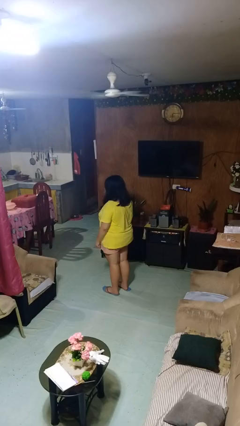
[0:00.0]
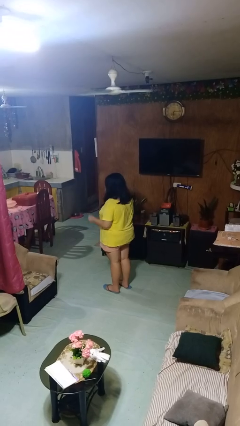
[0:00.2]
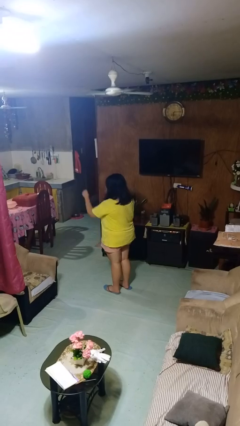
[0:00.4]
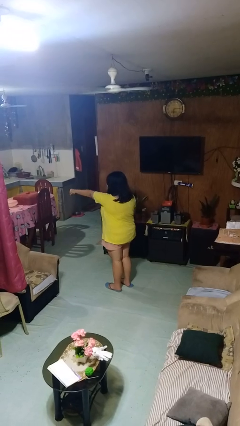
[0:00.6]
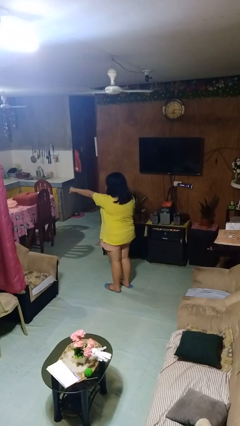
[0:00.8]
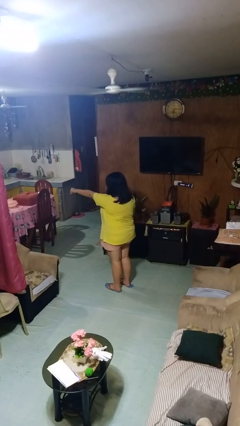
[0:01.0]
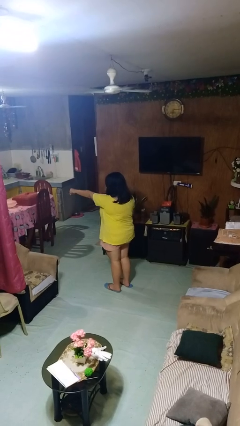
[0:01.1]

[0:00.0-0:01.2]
person punches

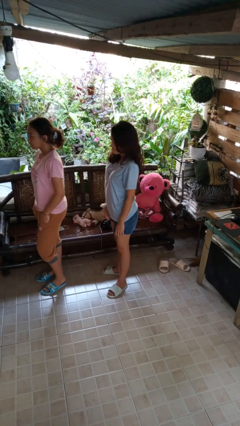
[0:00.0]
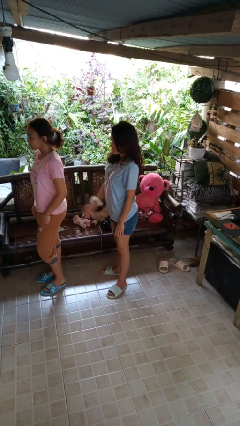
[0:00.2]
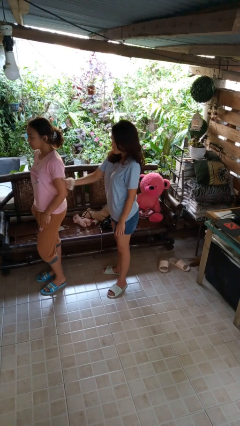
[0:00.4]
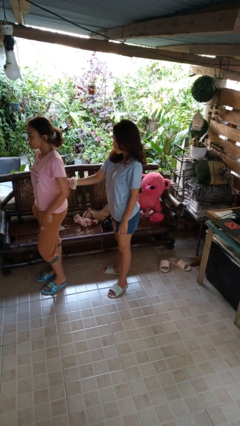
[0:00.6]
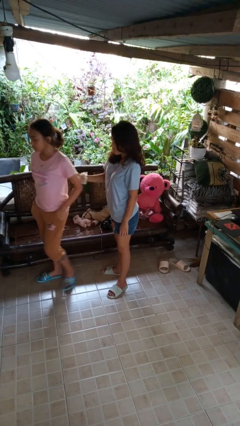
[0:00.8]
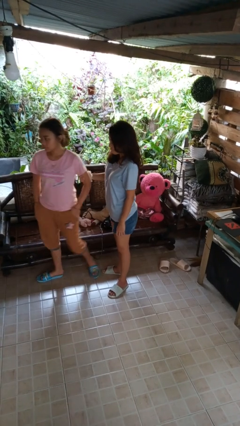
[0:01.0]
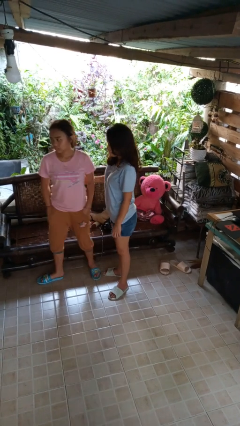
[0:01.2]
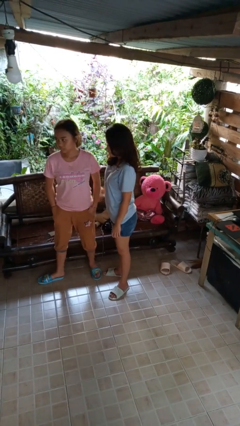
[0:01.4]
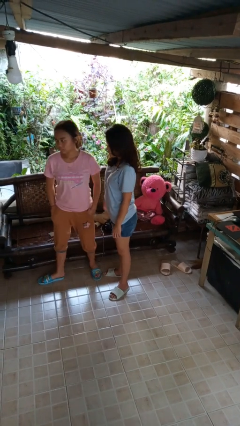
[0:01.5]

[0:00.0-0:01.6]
person grabs person by bicep

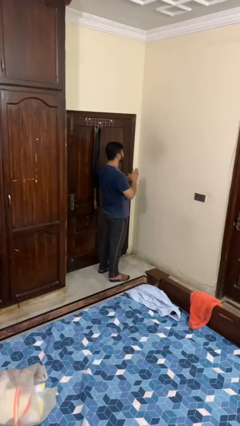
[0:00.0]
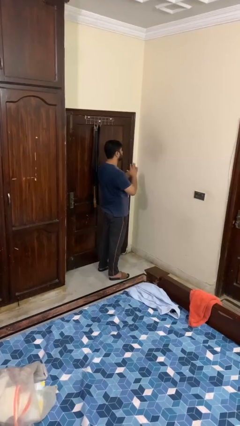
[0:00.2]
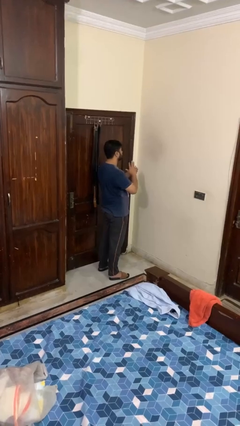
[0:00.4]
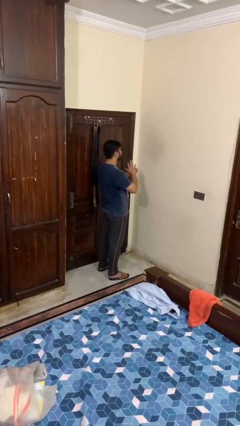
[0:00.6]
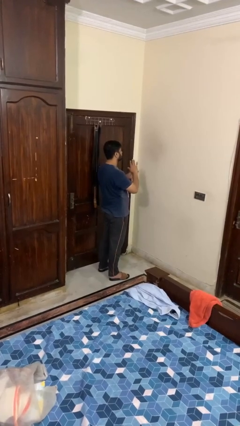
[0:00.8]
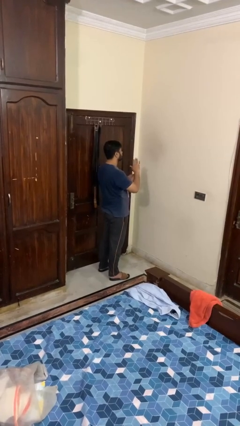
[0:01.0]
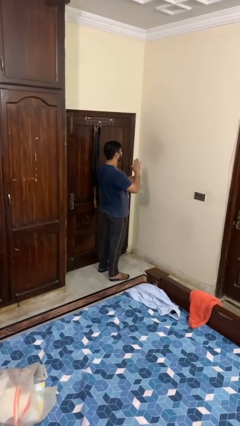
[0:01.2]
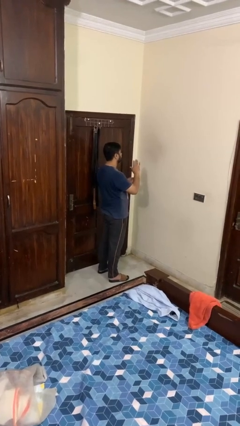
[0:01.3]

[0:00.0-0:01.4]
person puts on ring

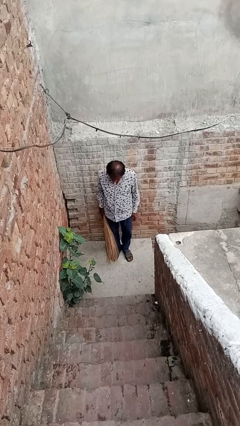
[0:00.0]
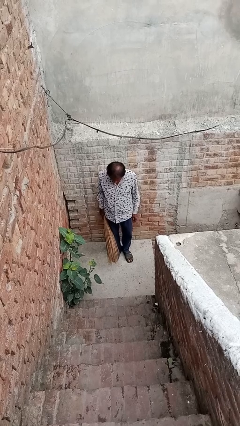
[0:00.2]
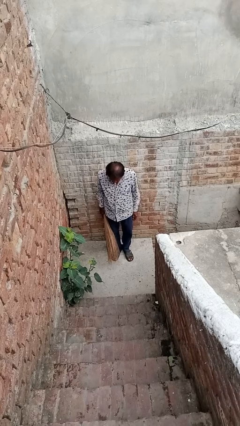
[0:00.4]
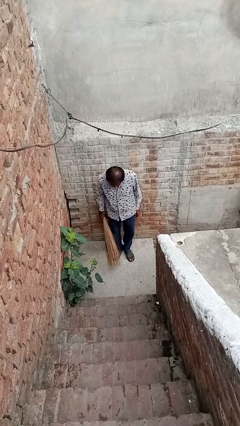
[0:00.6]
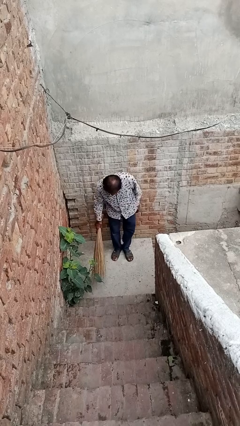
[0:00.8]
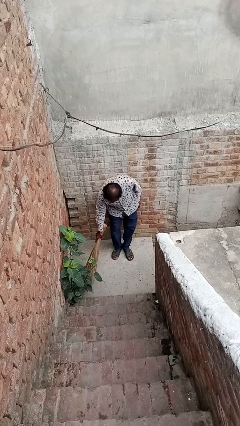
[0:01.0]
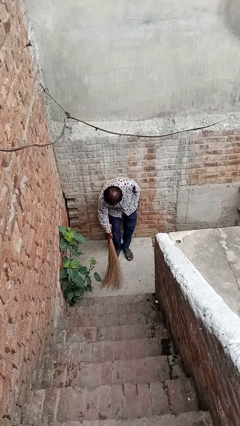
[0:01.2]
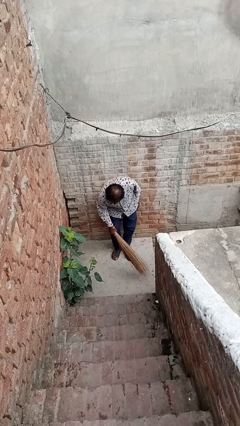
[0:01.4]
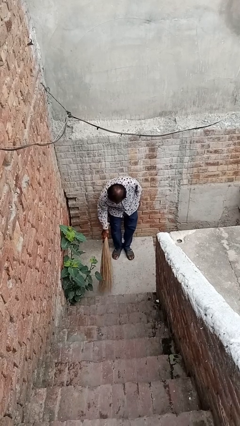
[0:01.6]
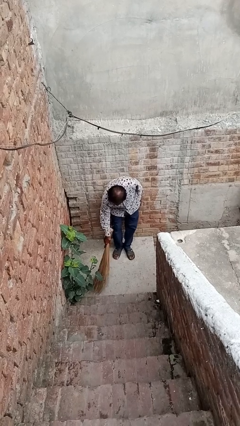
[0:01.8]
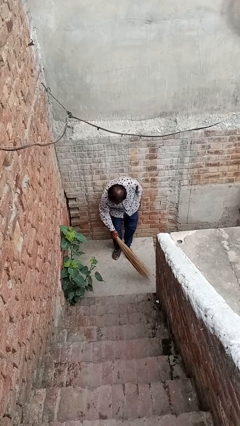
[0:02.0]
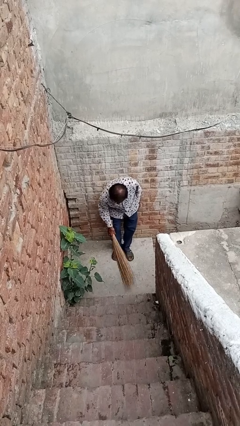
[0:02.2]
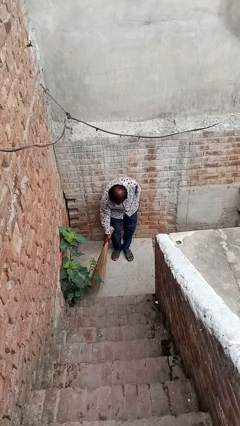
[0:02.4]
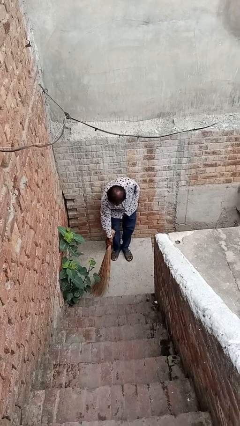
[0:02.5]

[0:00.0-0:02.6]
person sweeps floor

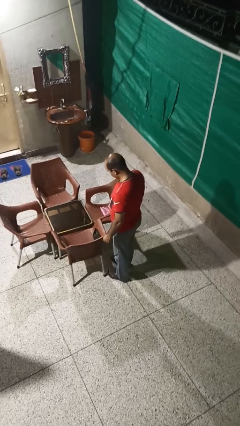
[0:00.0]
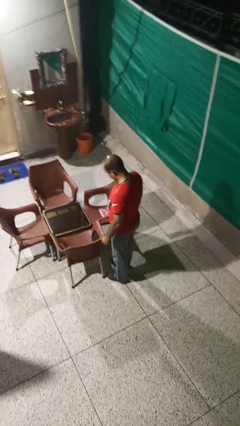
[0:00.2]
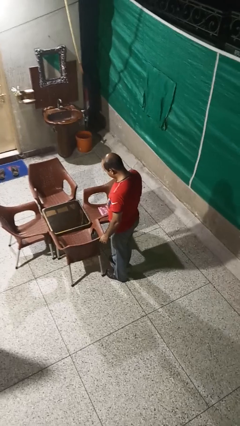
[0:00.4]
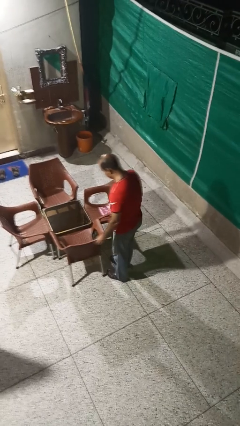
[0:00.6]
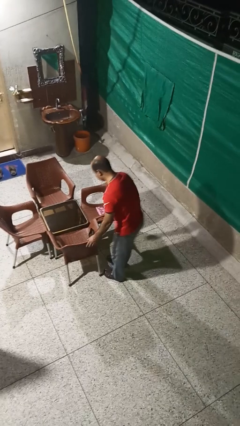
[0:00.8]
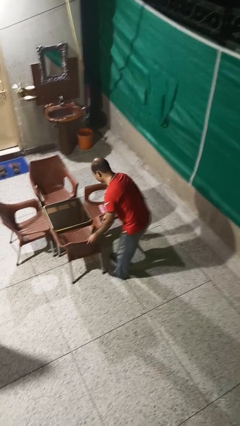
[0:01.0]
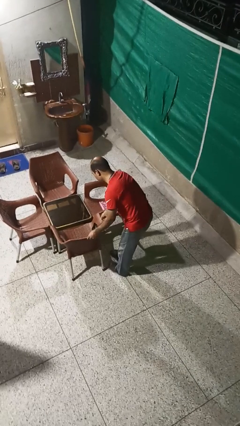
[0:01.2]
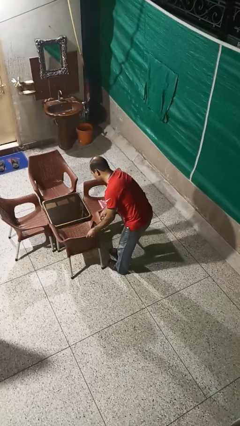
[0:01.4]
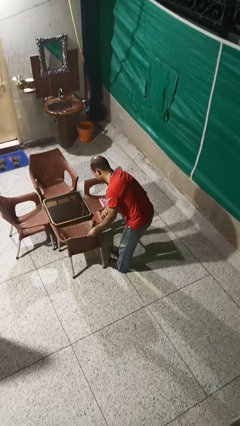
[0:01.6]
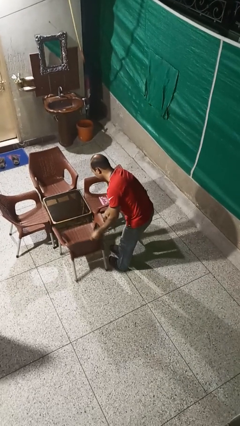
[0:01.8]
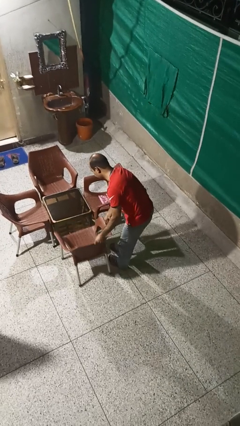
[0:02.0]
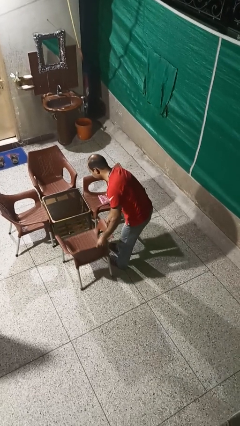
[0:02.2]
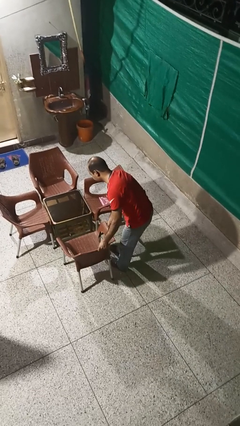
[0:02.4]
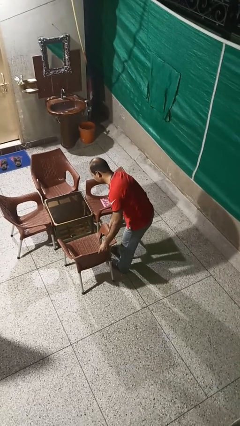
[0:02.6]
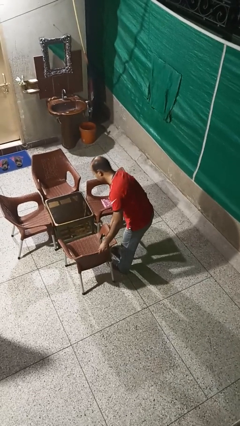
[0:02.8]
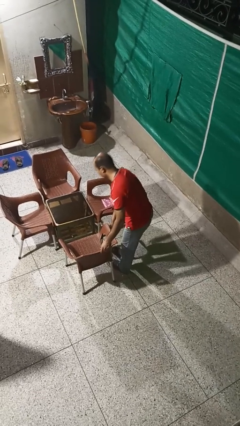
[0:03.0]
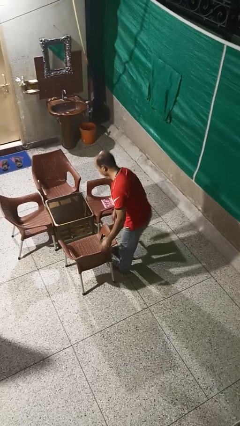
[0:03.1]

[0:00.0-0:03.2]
person pulls out chair

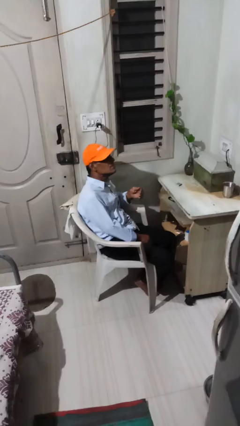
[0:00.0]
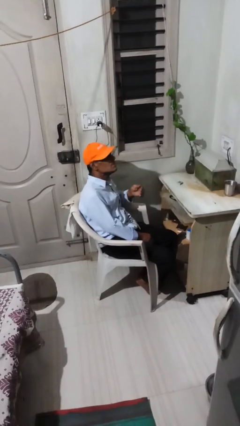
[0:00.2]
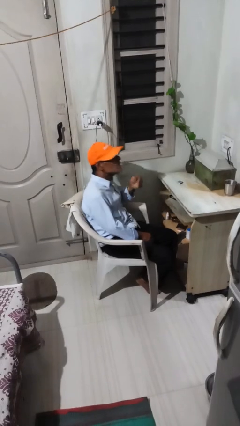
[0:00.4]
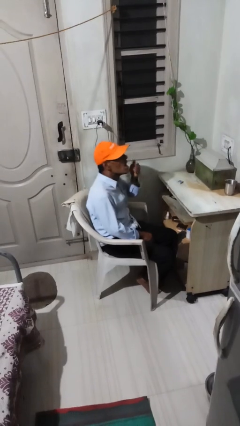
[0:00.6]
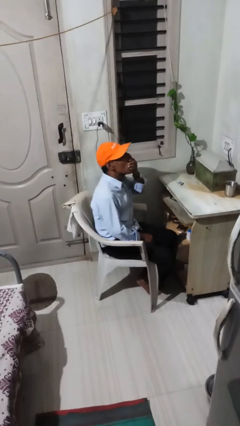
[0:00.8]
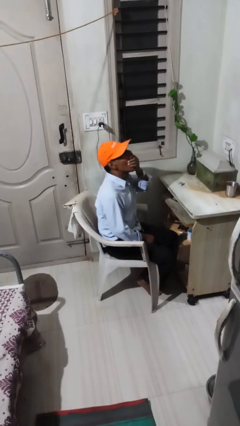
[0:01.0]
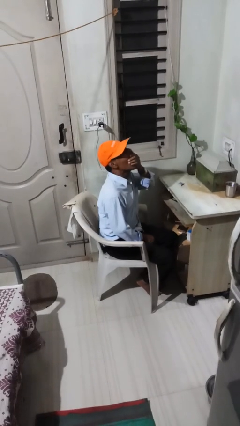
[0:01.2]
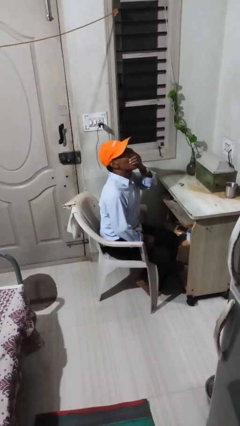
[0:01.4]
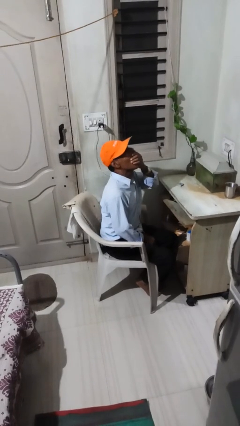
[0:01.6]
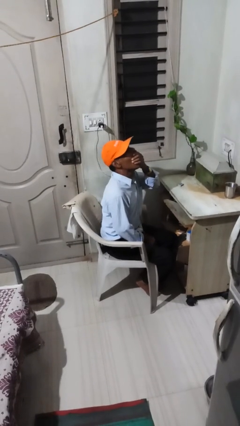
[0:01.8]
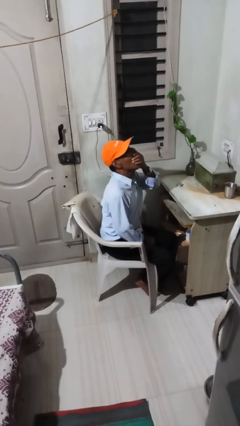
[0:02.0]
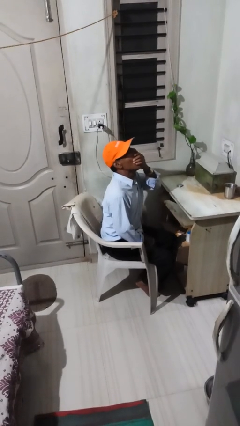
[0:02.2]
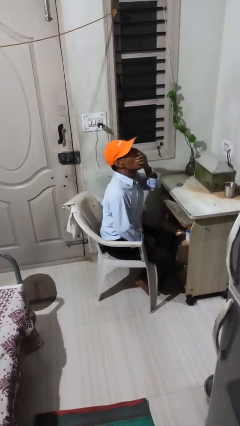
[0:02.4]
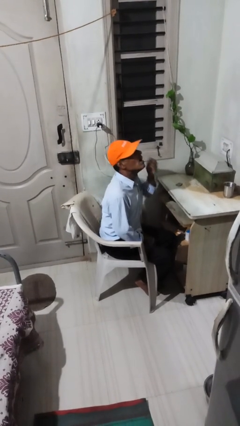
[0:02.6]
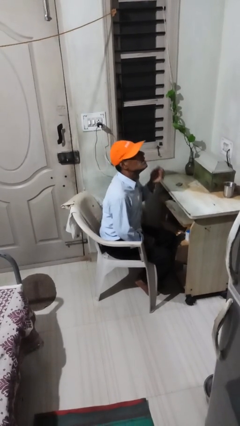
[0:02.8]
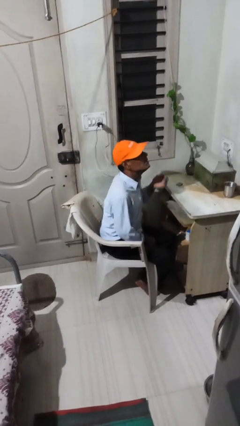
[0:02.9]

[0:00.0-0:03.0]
person yawns

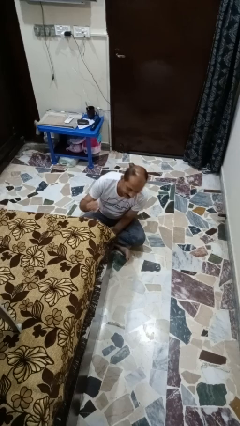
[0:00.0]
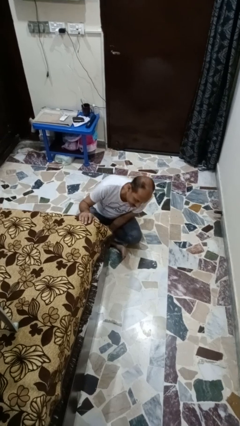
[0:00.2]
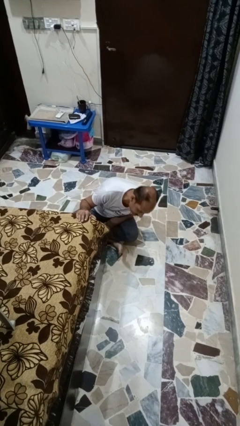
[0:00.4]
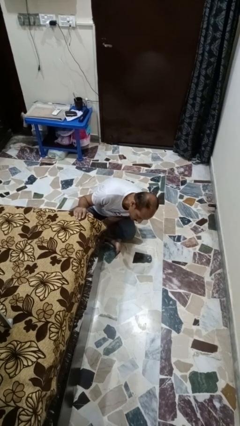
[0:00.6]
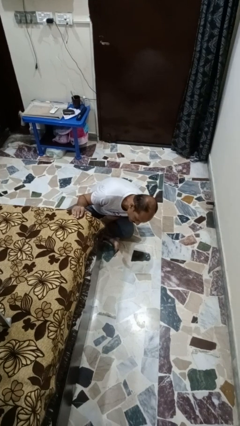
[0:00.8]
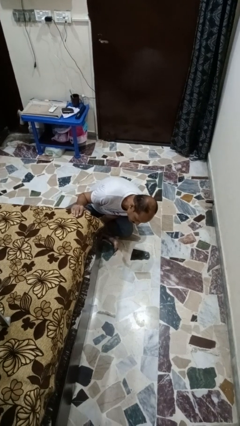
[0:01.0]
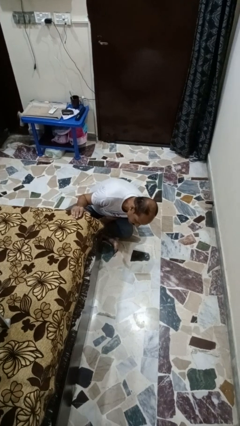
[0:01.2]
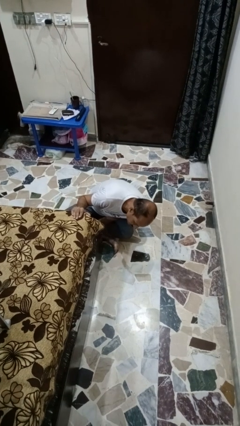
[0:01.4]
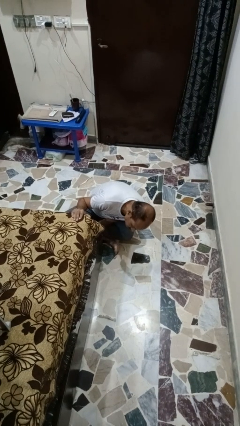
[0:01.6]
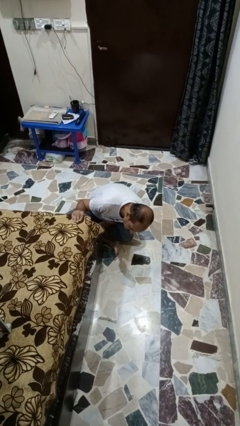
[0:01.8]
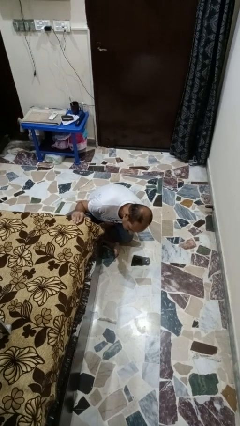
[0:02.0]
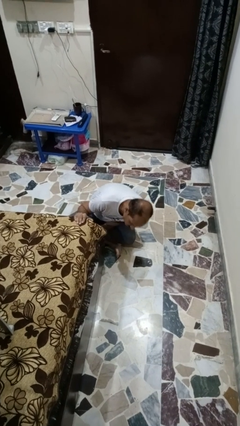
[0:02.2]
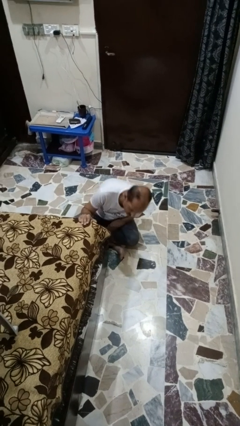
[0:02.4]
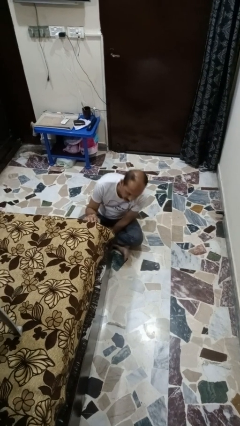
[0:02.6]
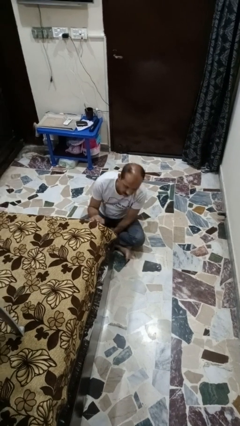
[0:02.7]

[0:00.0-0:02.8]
person searches under bed

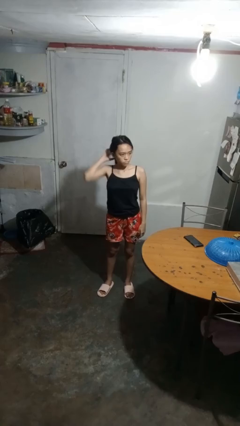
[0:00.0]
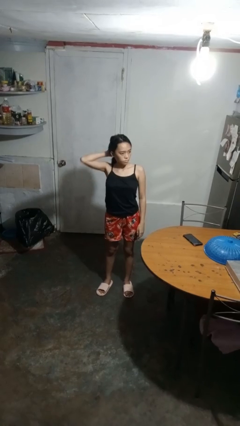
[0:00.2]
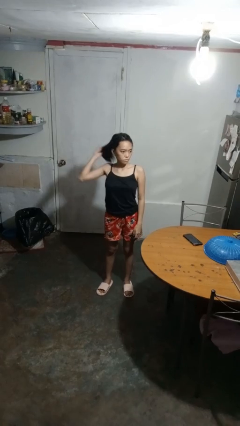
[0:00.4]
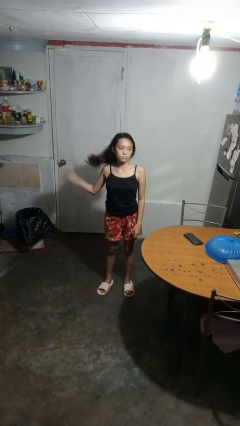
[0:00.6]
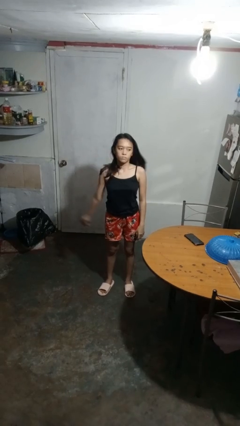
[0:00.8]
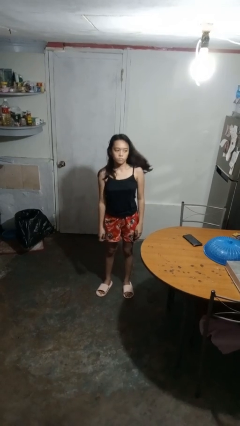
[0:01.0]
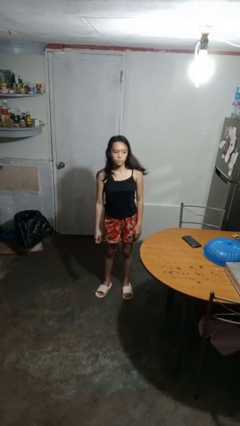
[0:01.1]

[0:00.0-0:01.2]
person takes off hairtie
